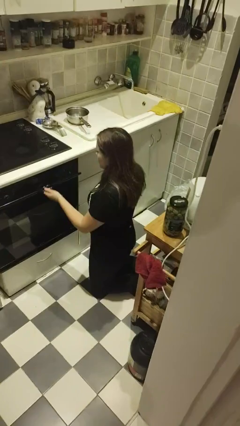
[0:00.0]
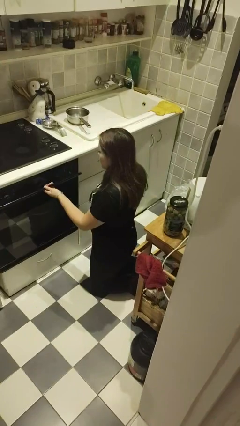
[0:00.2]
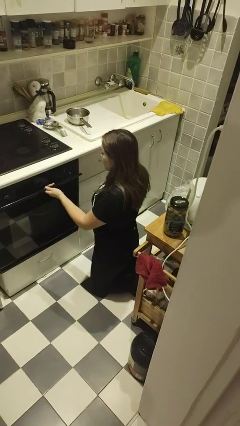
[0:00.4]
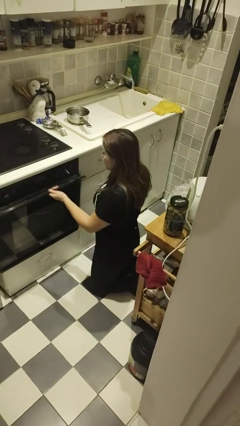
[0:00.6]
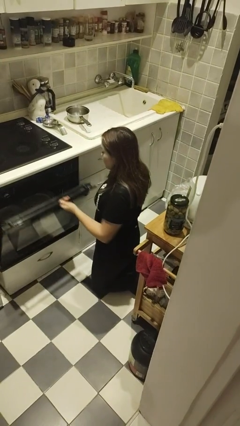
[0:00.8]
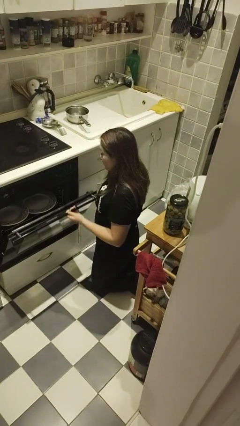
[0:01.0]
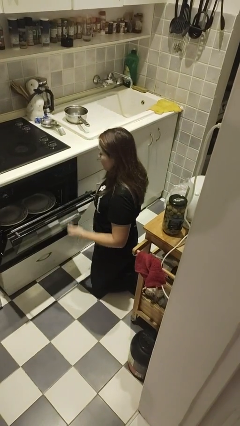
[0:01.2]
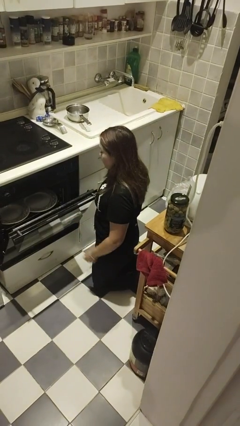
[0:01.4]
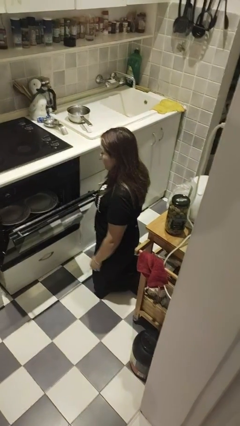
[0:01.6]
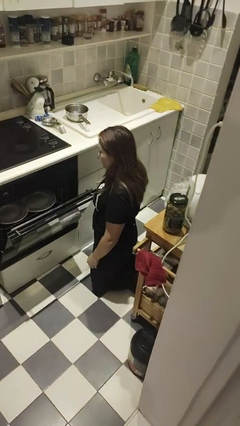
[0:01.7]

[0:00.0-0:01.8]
person opens dishwasher

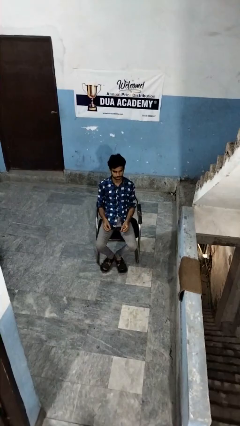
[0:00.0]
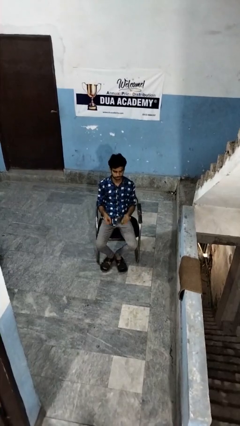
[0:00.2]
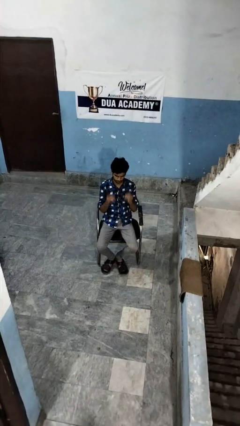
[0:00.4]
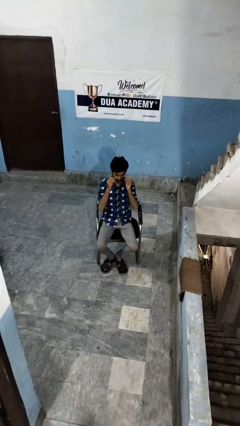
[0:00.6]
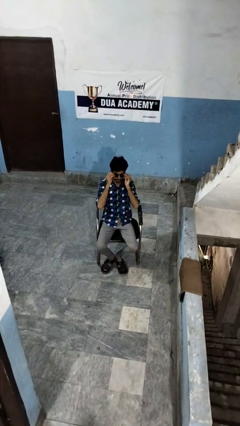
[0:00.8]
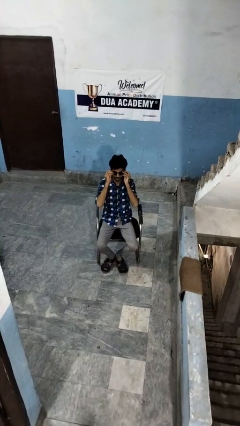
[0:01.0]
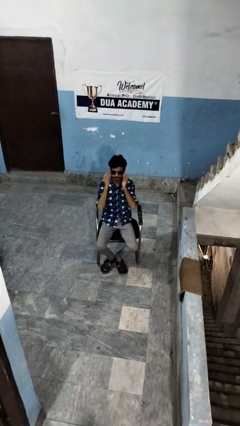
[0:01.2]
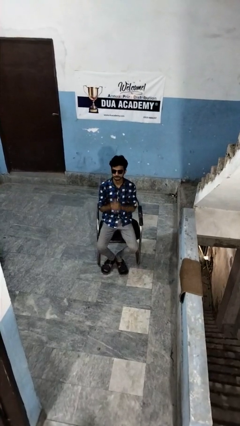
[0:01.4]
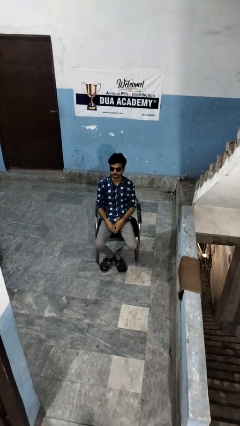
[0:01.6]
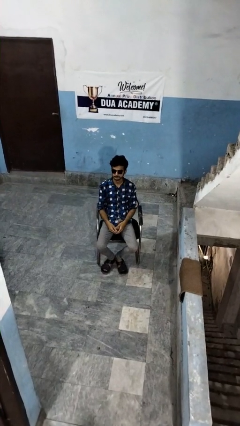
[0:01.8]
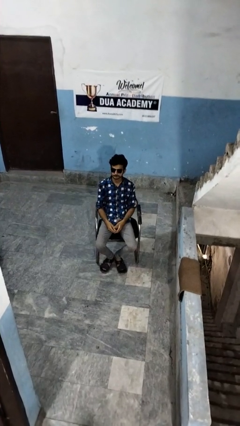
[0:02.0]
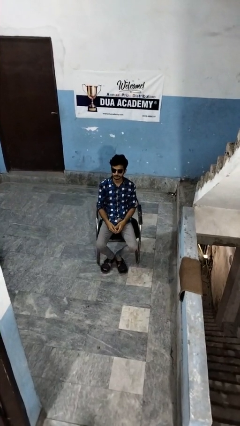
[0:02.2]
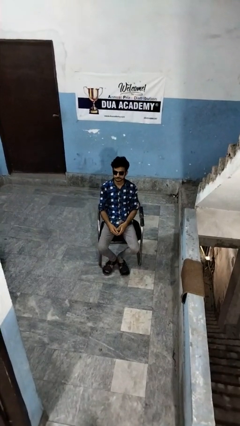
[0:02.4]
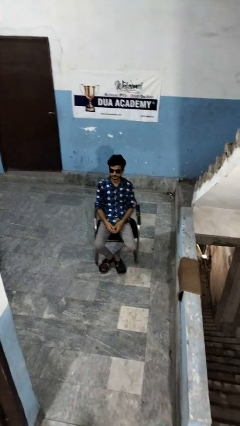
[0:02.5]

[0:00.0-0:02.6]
person puts on sunglasses

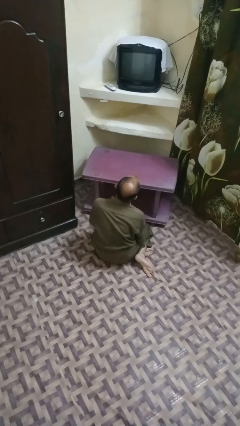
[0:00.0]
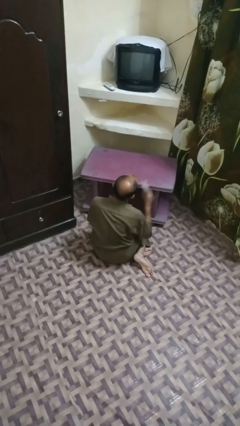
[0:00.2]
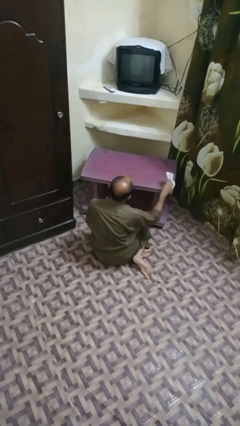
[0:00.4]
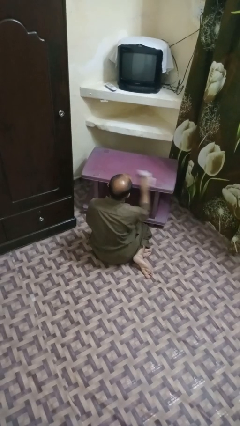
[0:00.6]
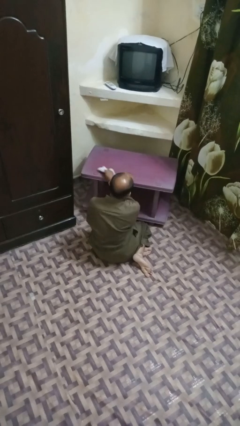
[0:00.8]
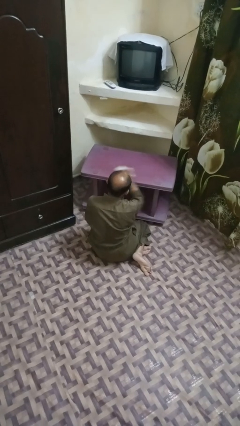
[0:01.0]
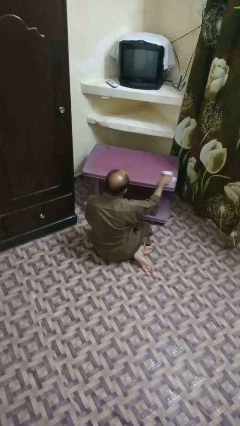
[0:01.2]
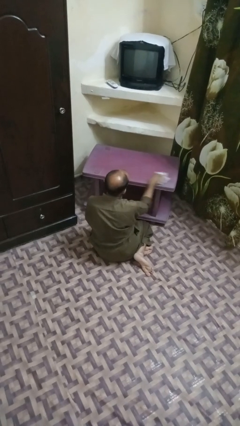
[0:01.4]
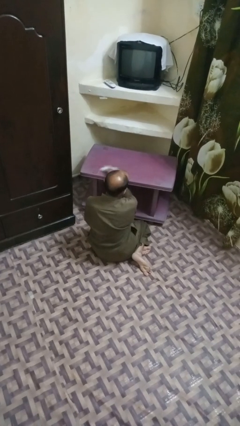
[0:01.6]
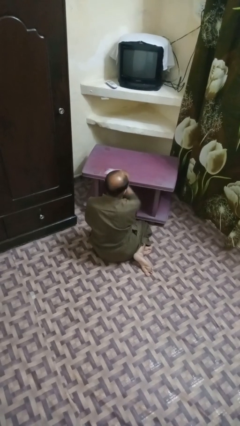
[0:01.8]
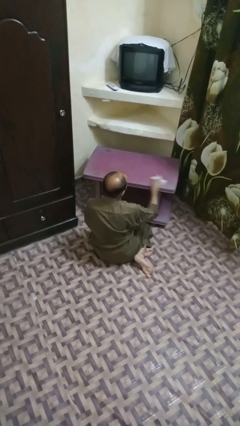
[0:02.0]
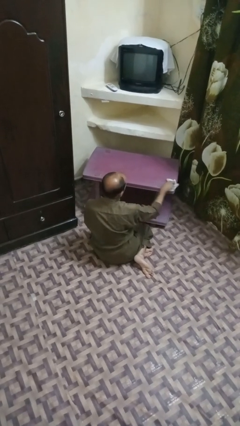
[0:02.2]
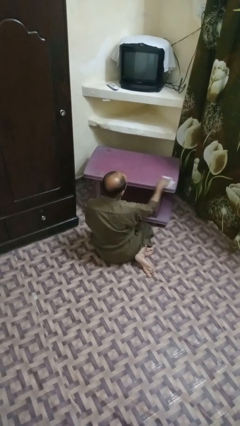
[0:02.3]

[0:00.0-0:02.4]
person cleans table with rag

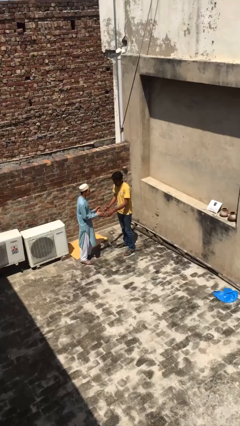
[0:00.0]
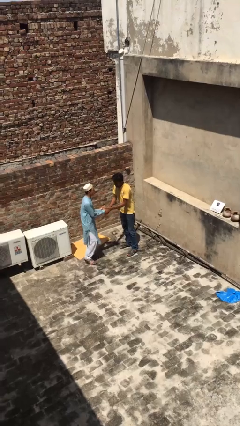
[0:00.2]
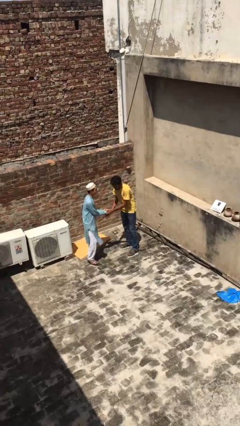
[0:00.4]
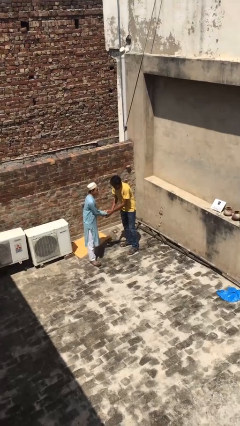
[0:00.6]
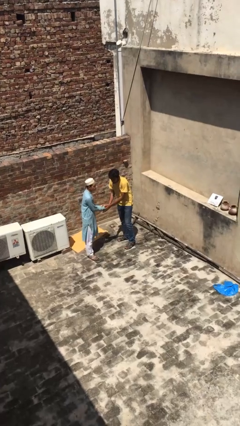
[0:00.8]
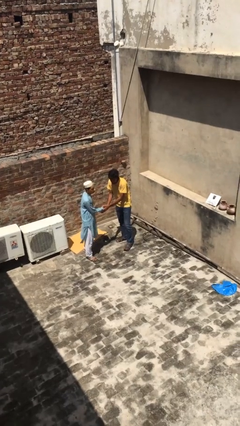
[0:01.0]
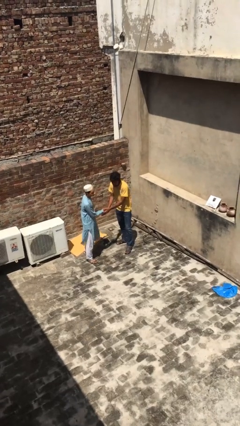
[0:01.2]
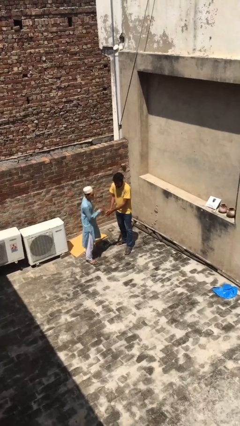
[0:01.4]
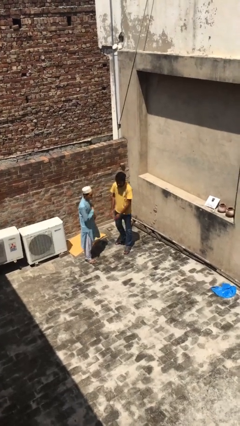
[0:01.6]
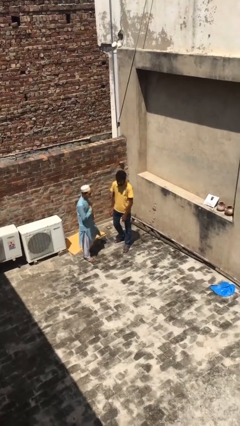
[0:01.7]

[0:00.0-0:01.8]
person shakes hand

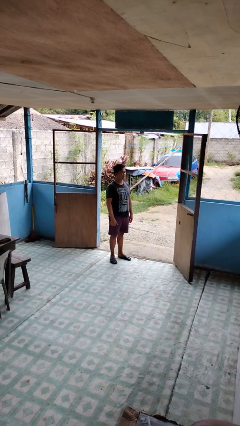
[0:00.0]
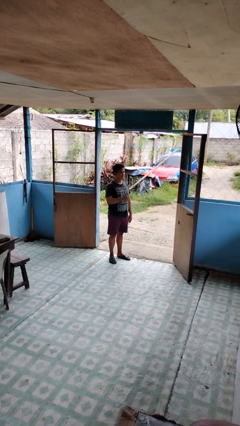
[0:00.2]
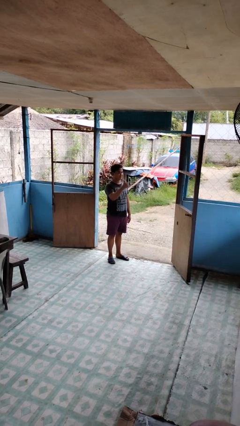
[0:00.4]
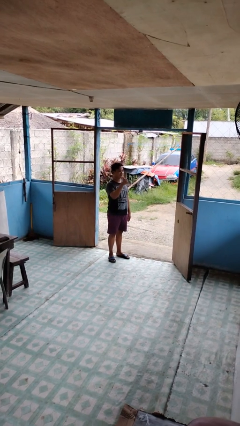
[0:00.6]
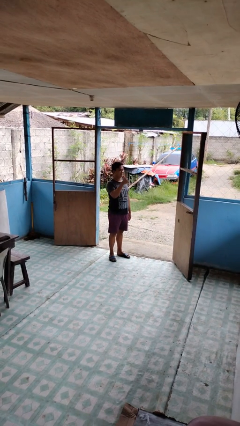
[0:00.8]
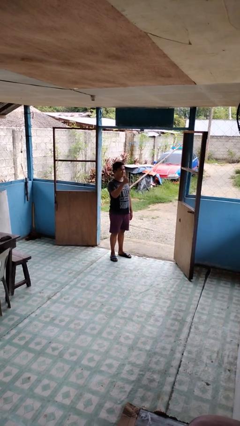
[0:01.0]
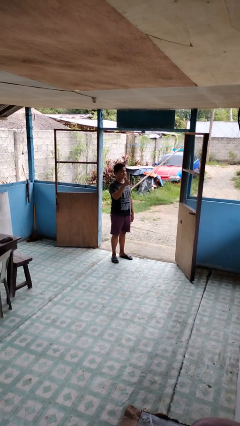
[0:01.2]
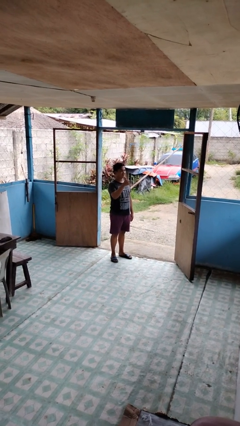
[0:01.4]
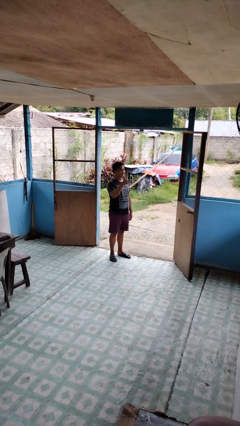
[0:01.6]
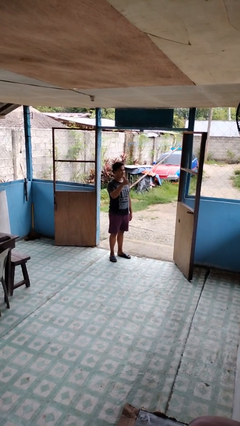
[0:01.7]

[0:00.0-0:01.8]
person gestures thumbs up

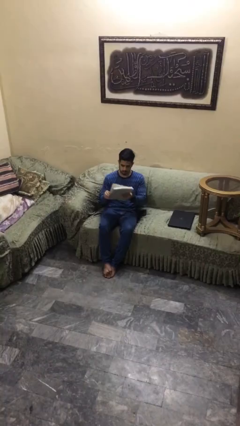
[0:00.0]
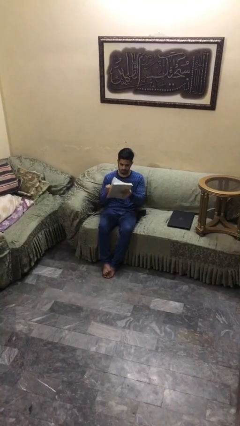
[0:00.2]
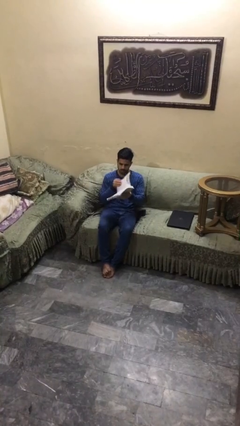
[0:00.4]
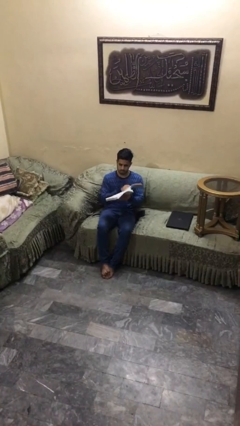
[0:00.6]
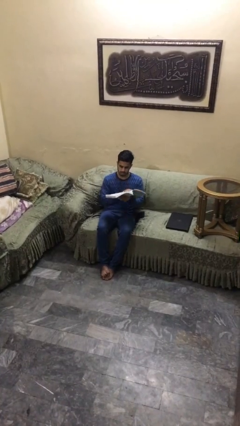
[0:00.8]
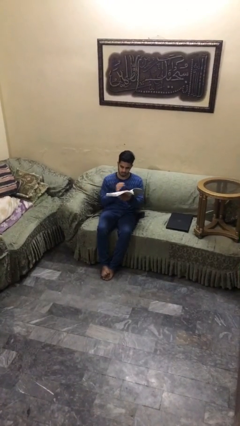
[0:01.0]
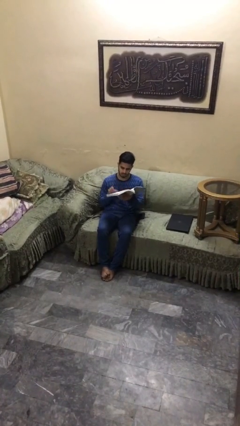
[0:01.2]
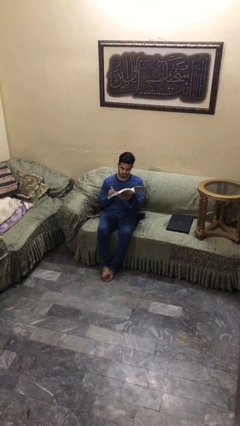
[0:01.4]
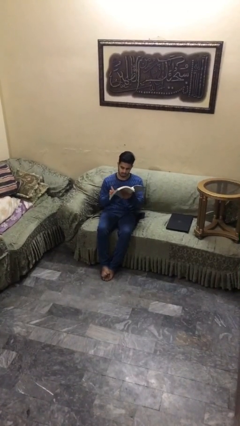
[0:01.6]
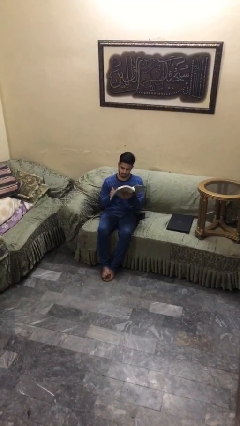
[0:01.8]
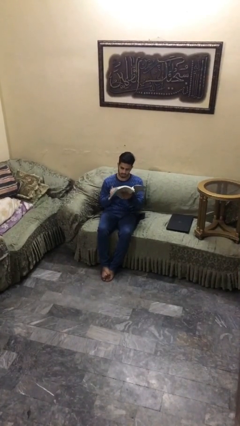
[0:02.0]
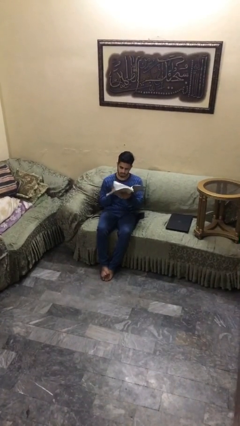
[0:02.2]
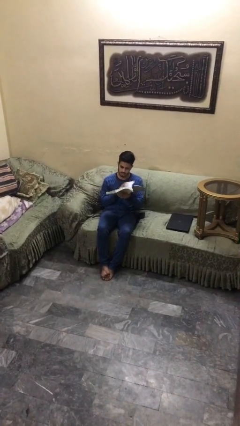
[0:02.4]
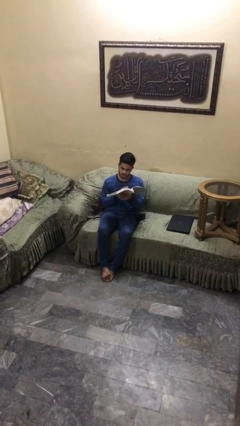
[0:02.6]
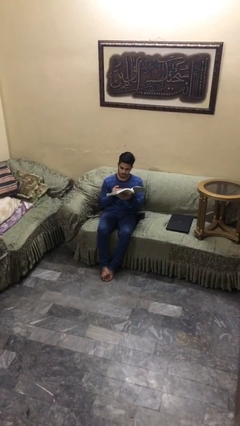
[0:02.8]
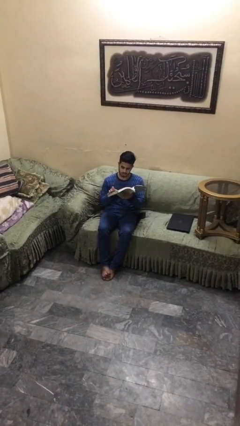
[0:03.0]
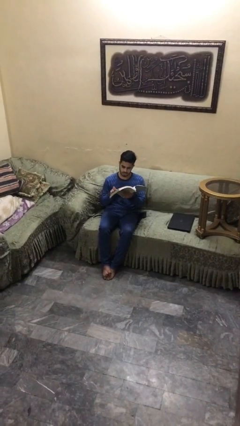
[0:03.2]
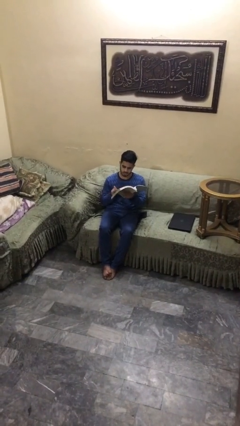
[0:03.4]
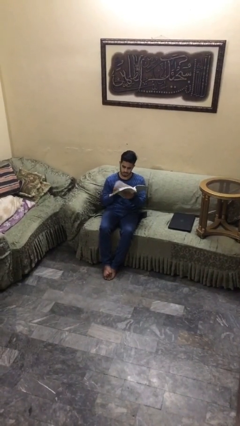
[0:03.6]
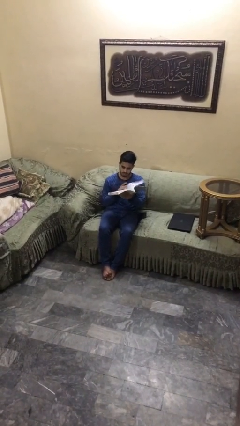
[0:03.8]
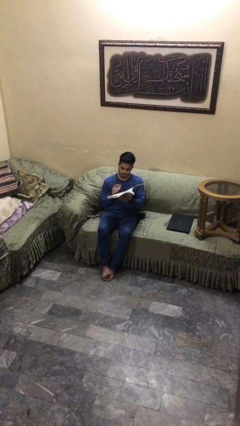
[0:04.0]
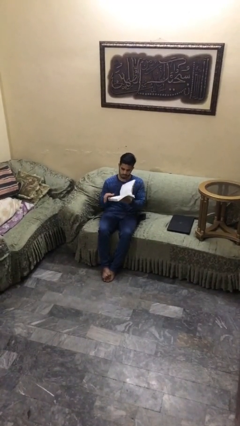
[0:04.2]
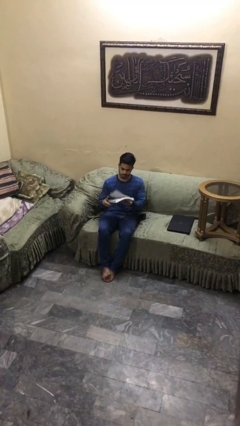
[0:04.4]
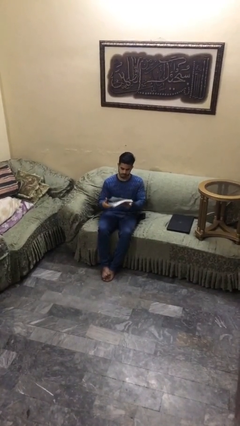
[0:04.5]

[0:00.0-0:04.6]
person reads document

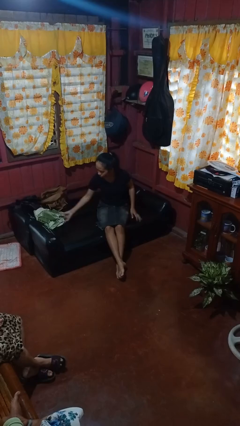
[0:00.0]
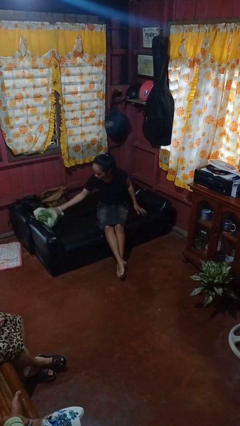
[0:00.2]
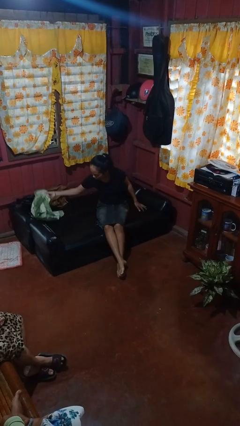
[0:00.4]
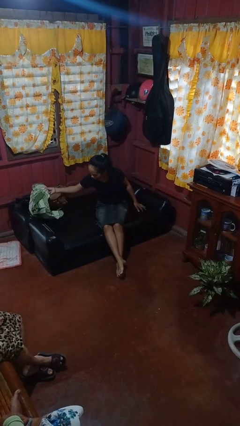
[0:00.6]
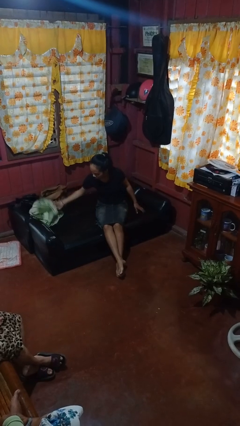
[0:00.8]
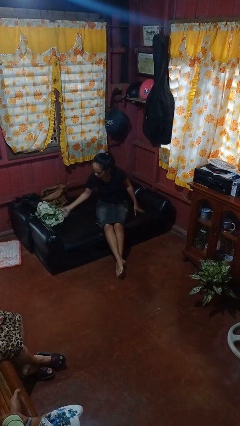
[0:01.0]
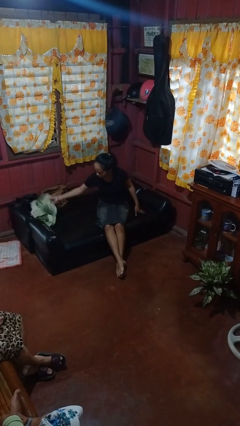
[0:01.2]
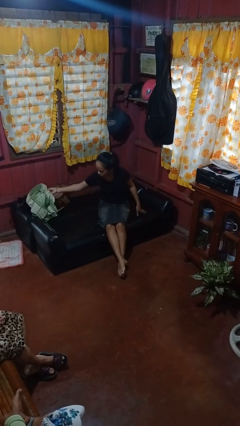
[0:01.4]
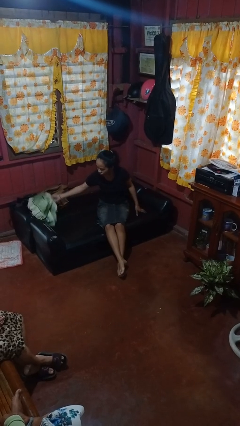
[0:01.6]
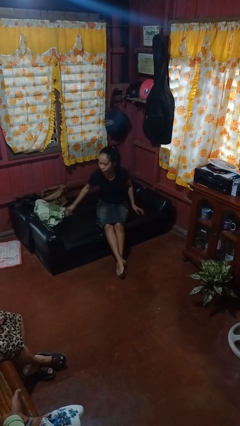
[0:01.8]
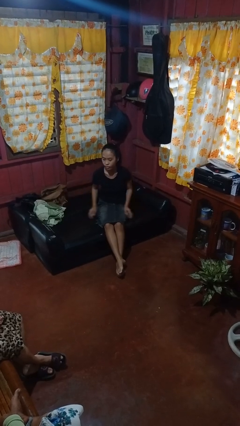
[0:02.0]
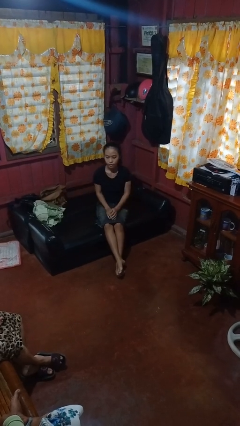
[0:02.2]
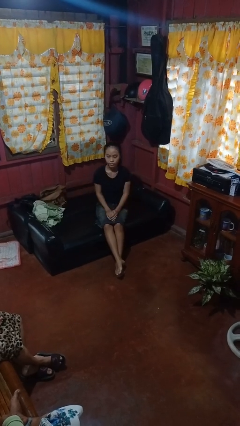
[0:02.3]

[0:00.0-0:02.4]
person searches in couch
